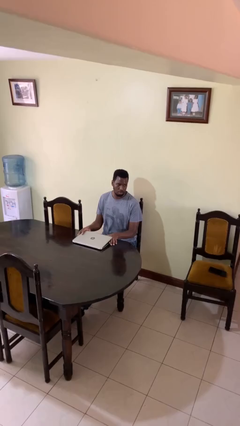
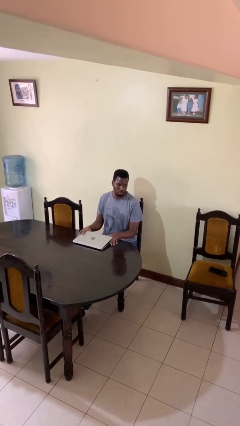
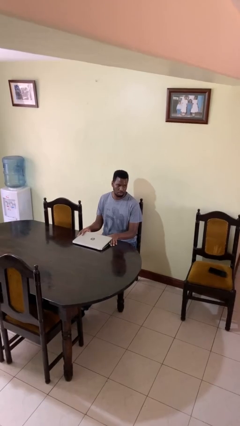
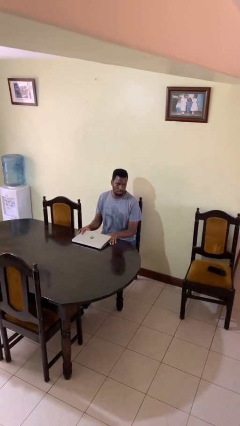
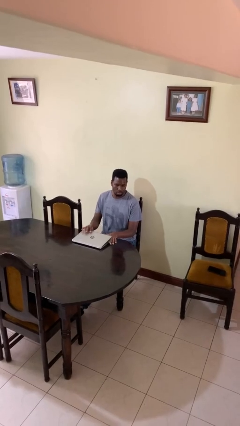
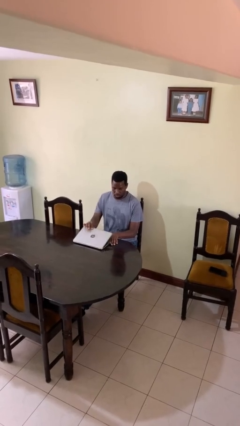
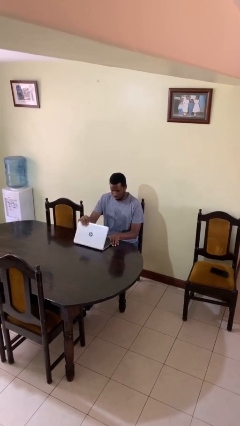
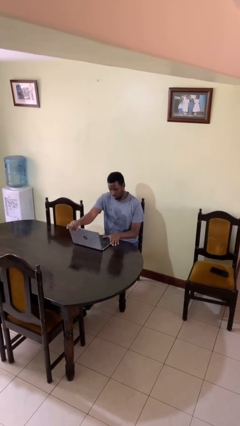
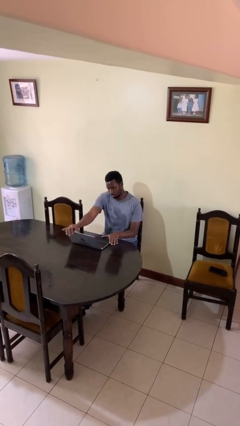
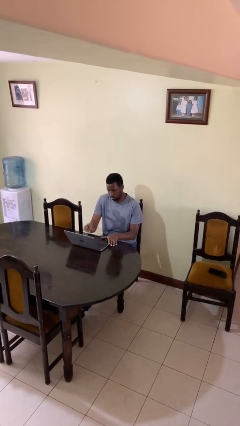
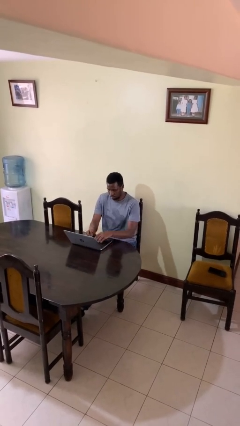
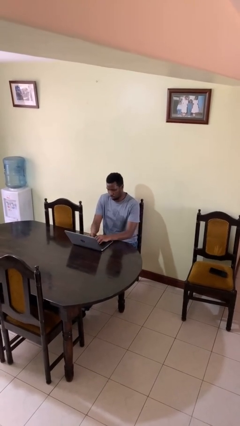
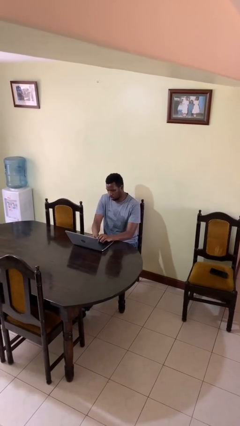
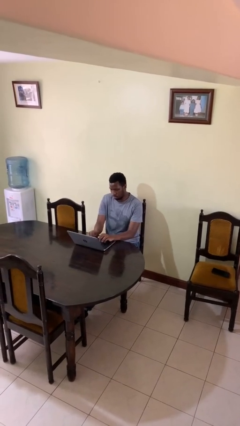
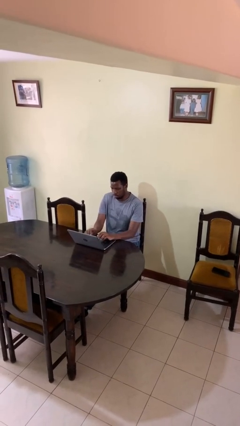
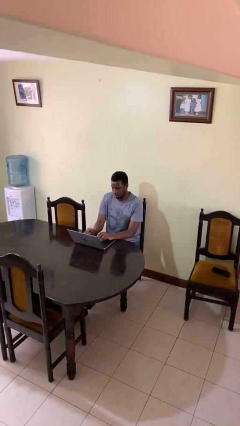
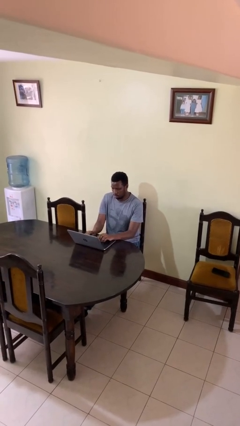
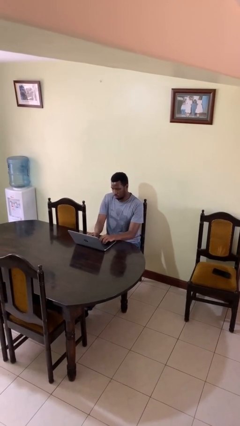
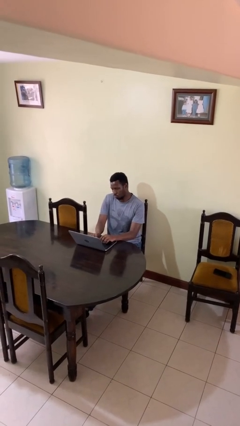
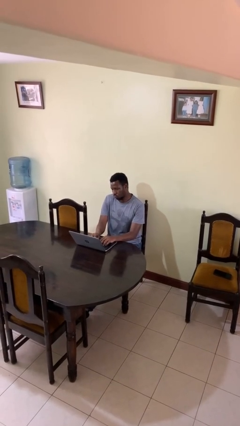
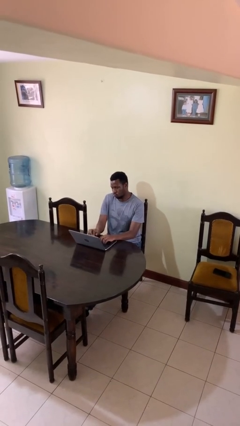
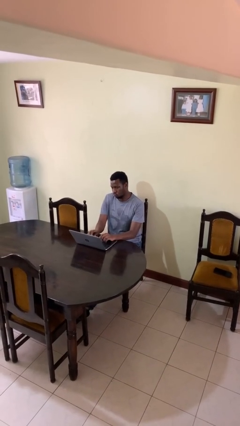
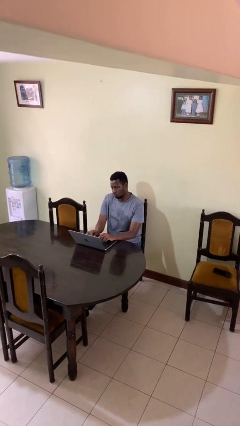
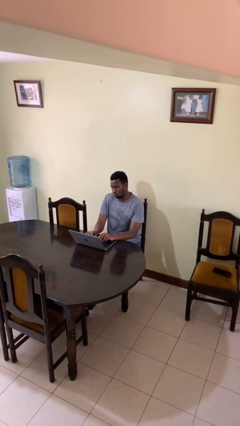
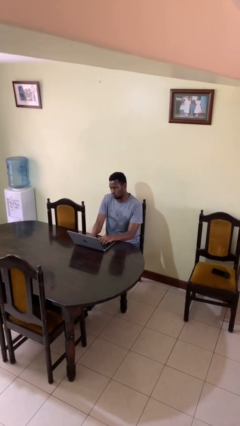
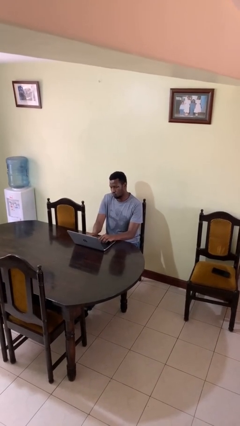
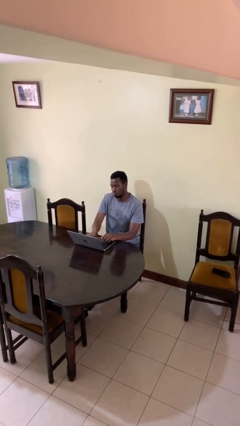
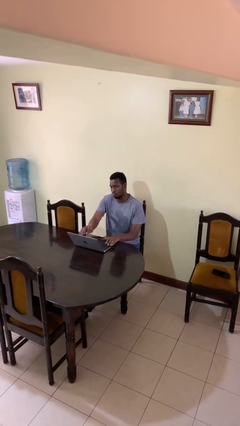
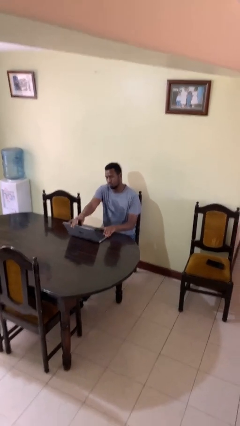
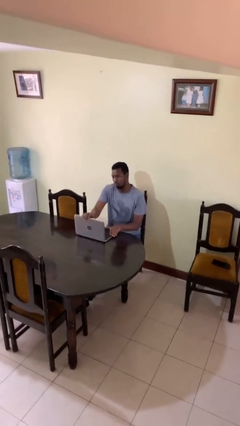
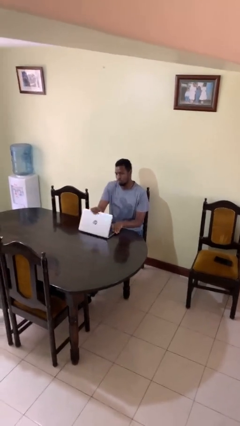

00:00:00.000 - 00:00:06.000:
person interacts with laptop

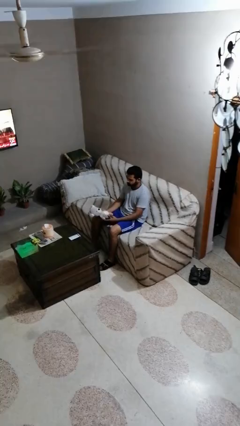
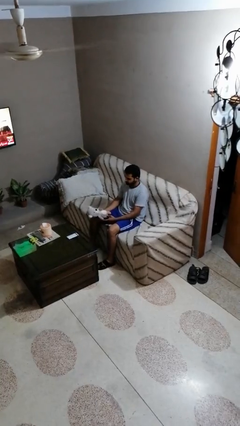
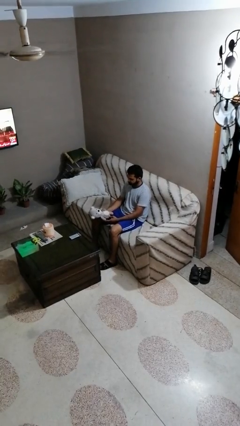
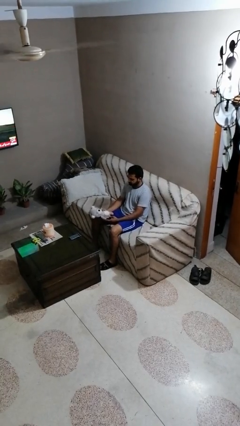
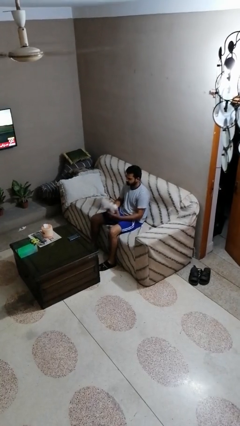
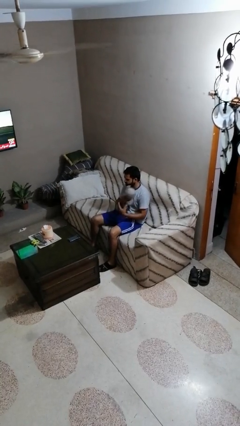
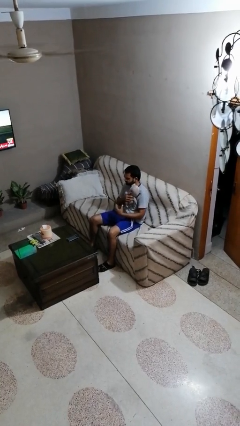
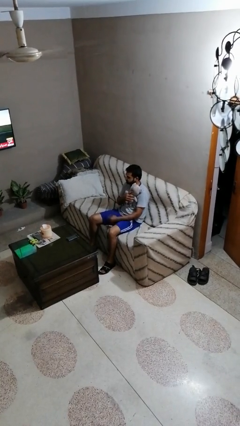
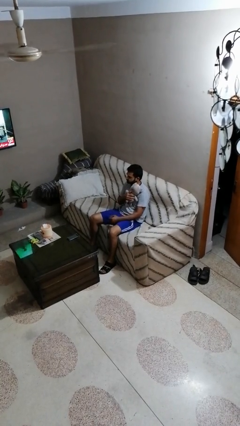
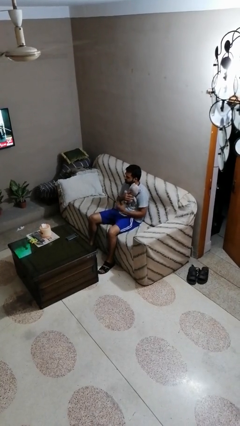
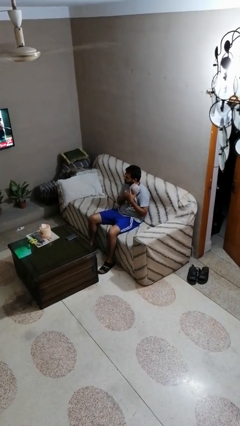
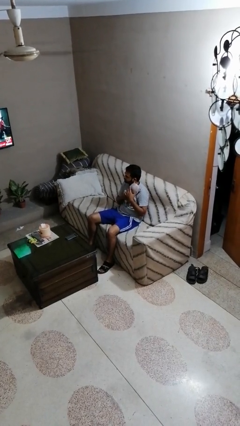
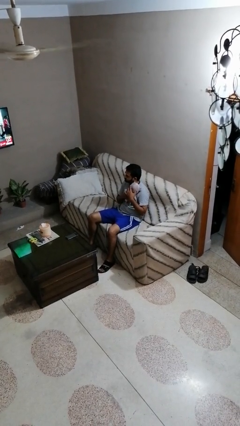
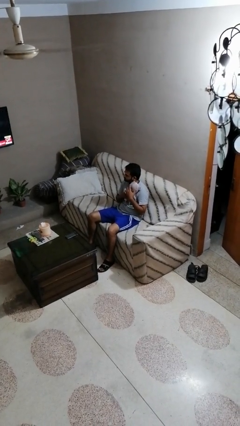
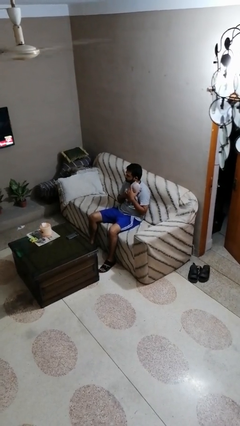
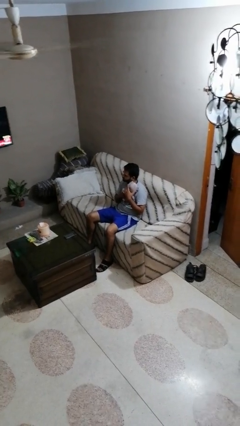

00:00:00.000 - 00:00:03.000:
person hugs stuffed animal

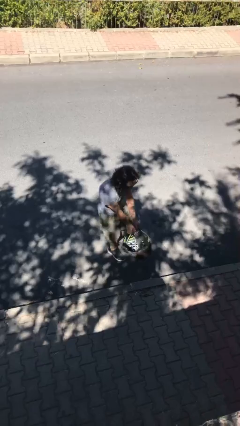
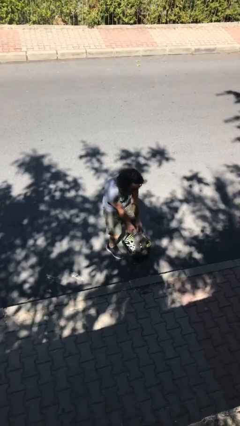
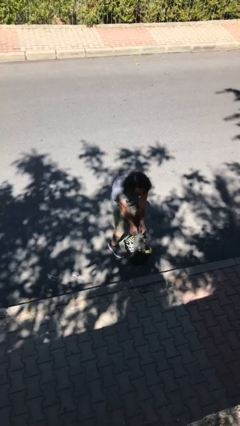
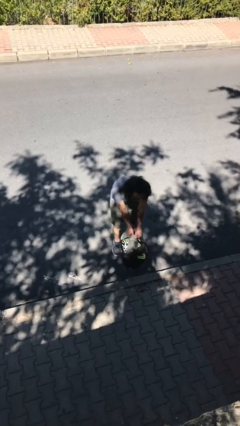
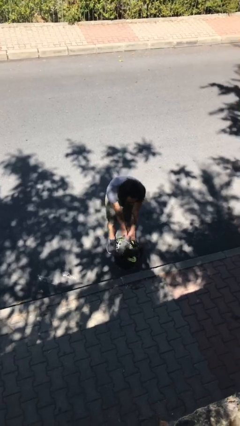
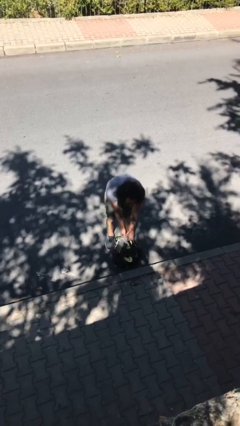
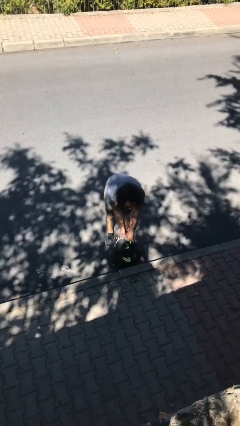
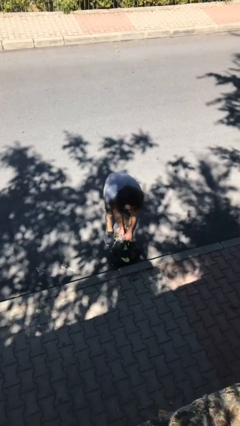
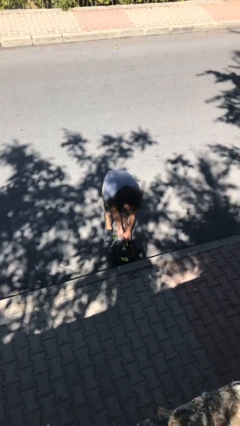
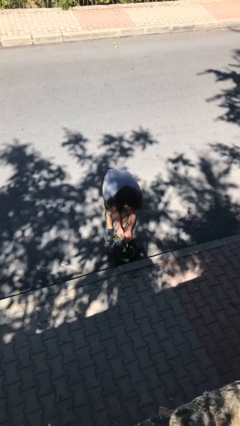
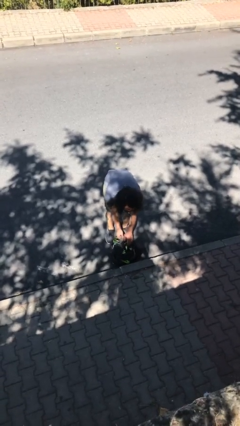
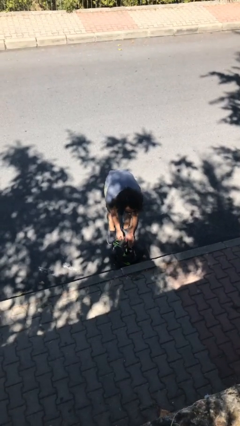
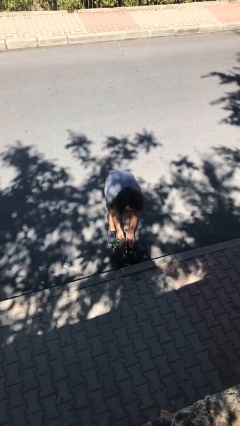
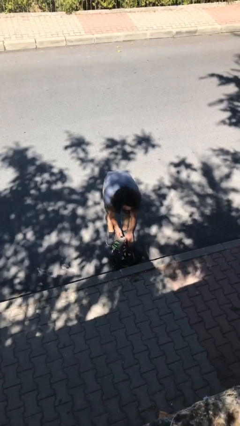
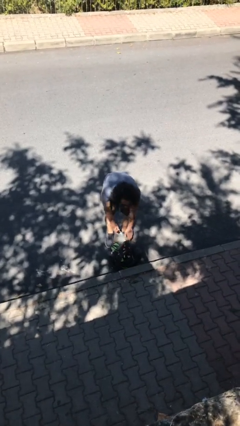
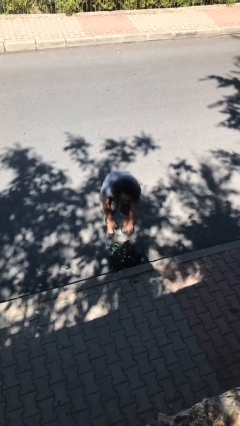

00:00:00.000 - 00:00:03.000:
person puts down object on floor

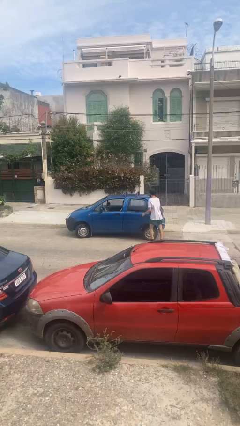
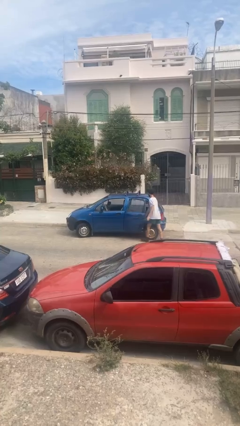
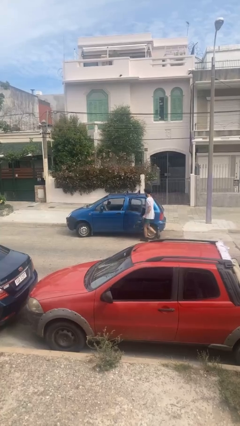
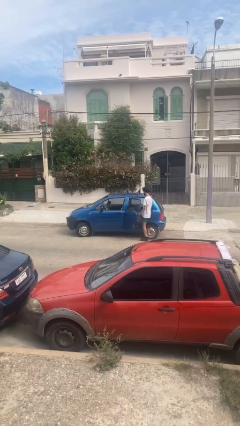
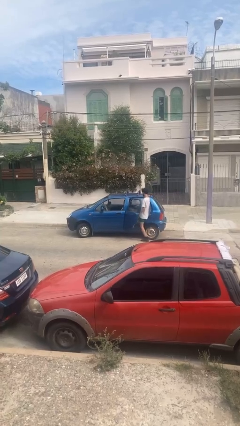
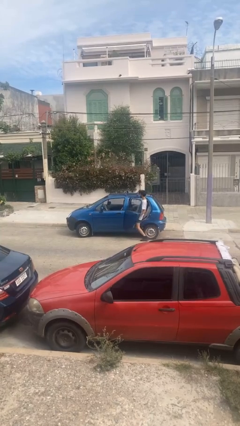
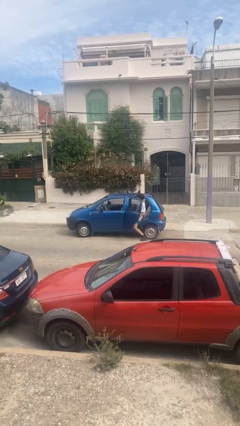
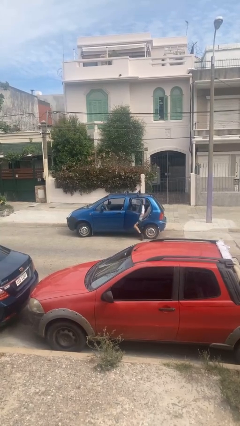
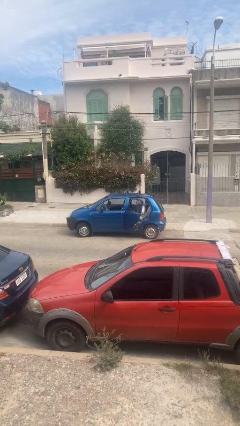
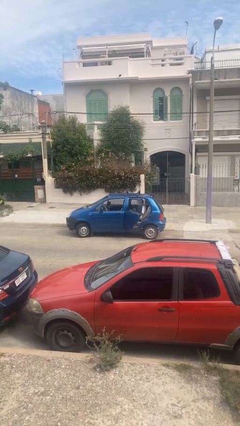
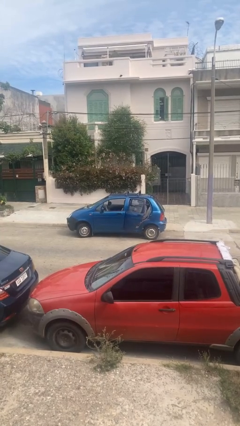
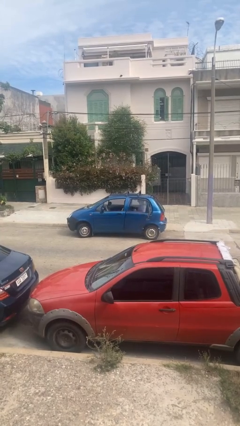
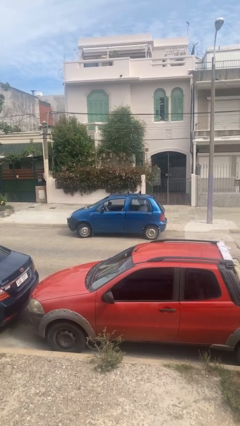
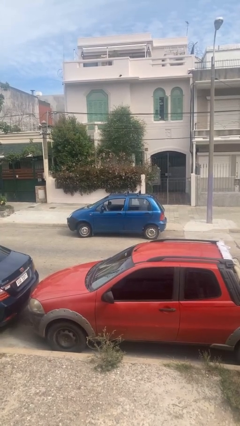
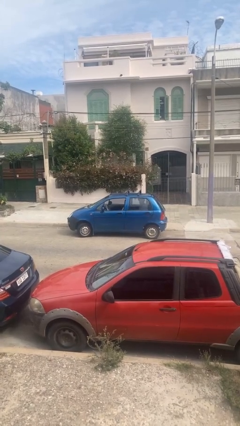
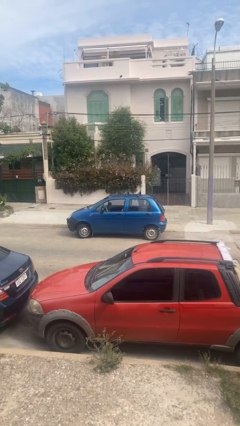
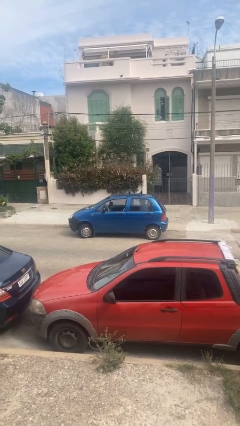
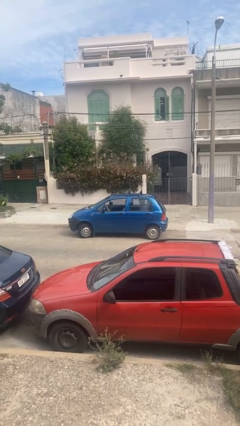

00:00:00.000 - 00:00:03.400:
car picks up person

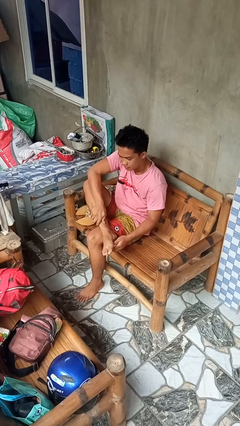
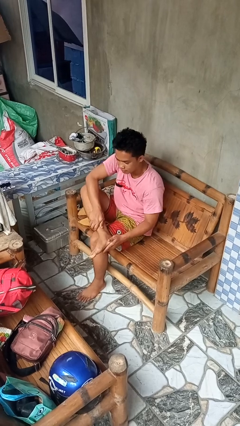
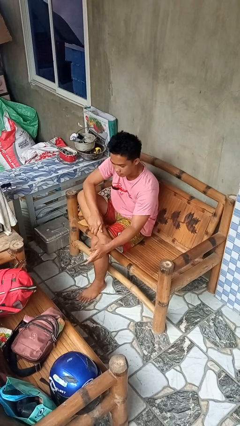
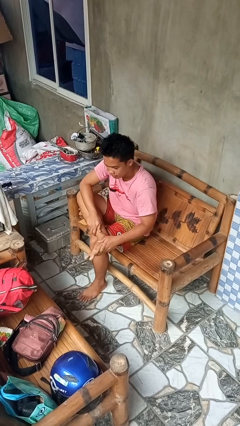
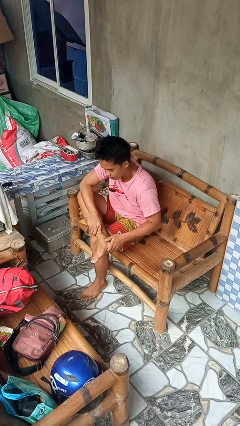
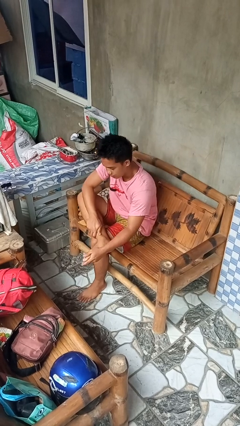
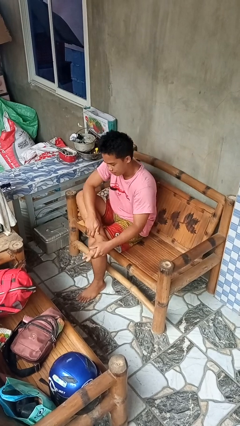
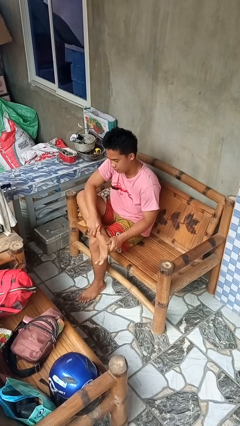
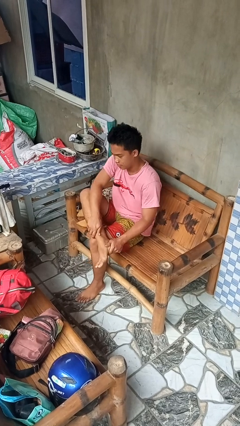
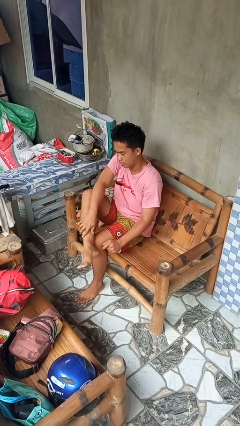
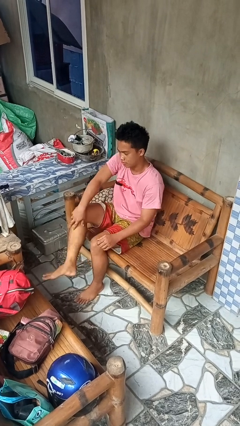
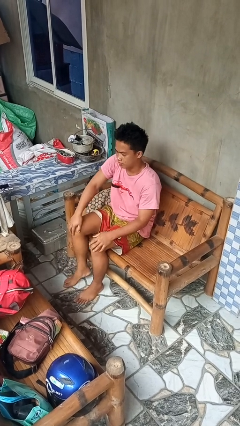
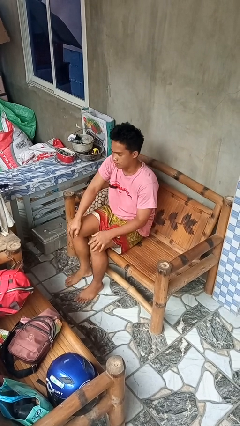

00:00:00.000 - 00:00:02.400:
person rubs foot
